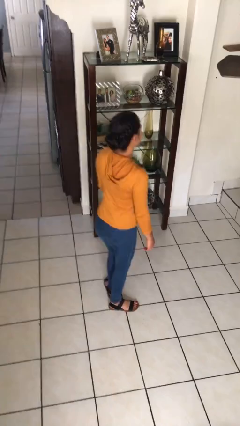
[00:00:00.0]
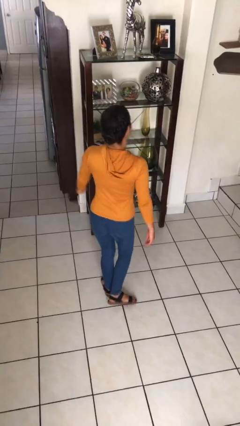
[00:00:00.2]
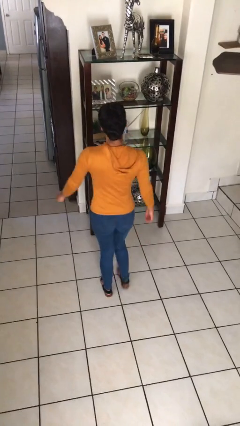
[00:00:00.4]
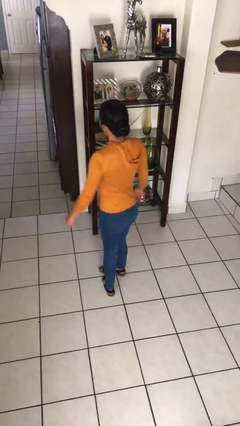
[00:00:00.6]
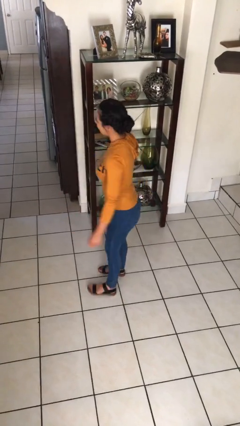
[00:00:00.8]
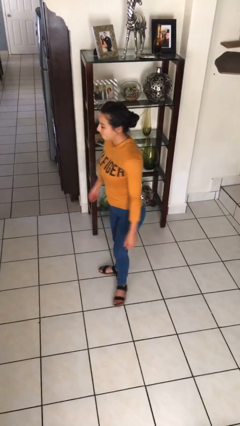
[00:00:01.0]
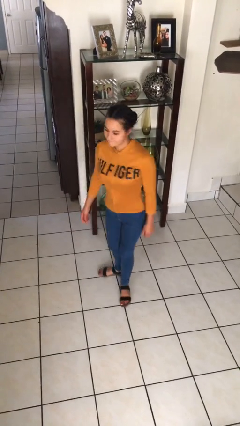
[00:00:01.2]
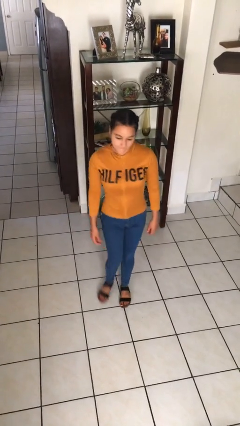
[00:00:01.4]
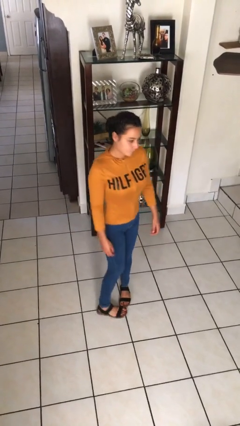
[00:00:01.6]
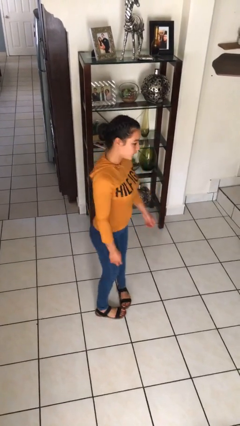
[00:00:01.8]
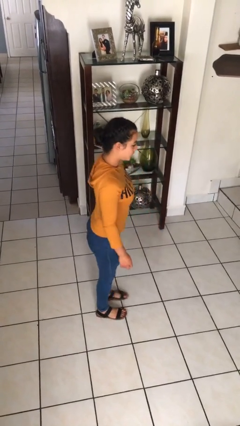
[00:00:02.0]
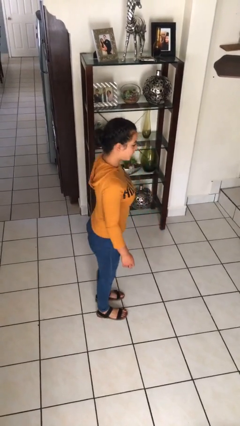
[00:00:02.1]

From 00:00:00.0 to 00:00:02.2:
person twirls

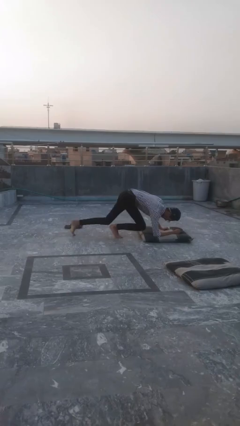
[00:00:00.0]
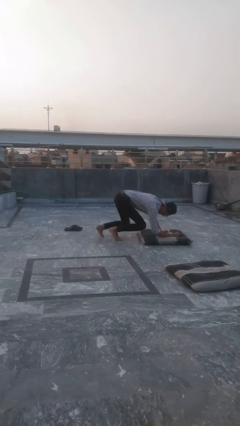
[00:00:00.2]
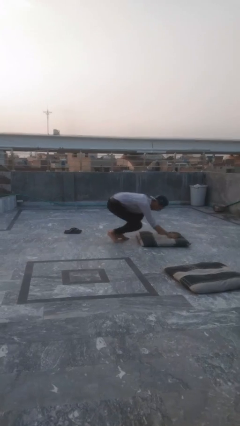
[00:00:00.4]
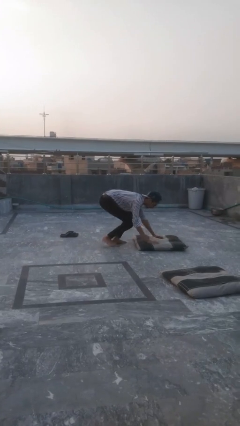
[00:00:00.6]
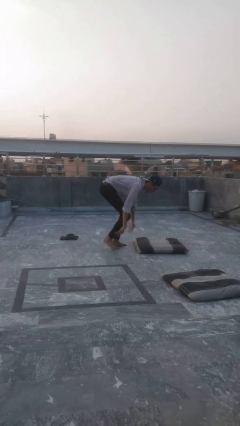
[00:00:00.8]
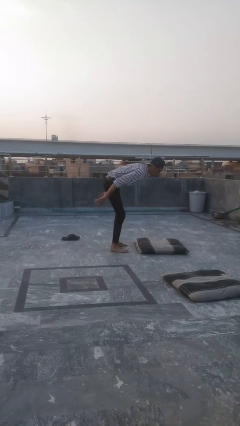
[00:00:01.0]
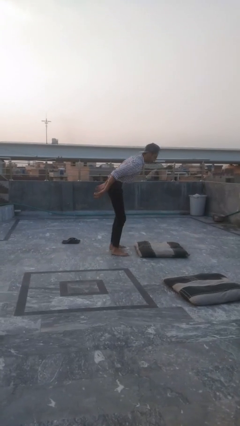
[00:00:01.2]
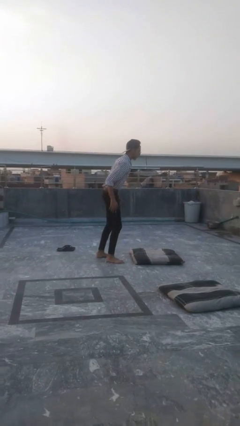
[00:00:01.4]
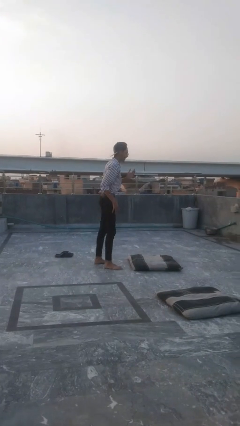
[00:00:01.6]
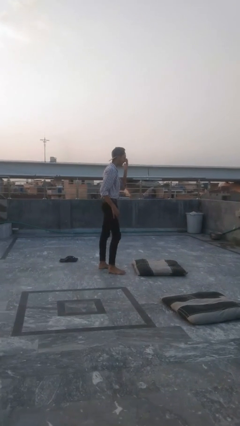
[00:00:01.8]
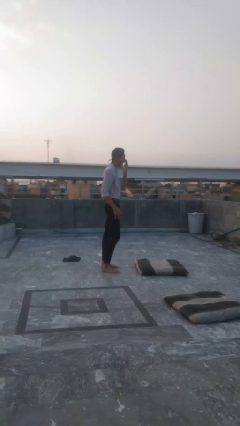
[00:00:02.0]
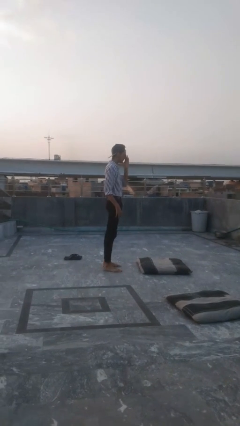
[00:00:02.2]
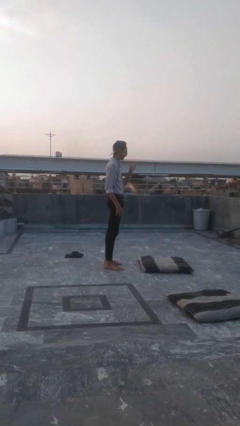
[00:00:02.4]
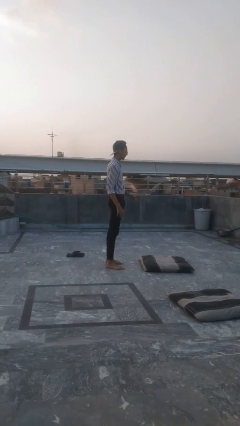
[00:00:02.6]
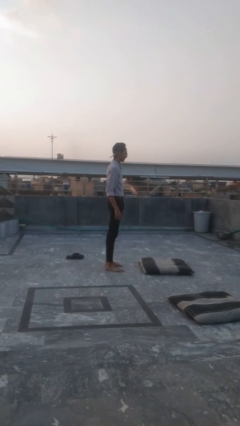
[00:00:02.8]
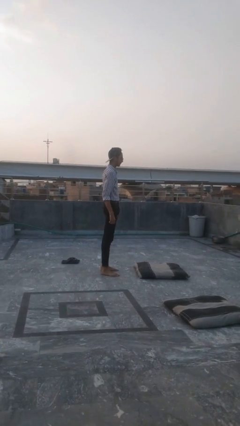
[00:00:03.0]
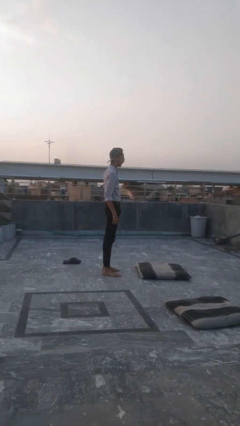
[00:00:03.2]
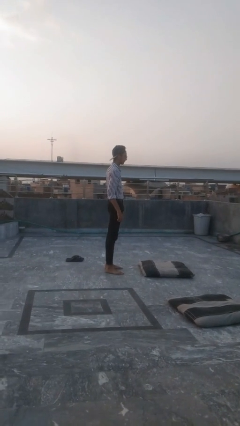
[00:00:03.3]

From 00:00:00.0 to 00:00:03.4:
person stands up from floor

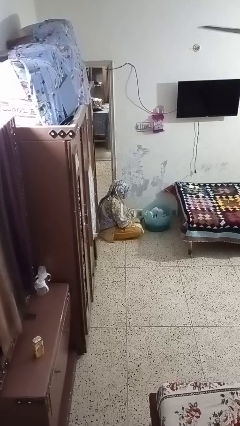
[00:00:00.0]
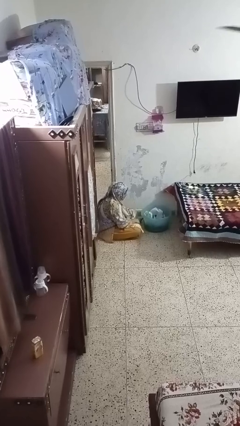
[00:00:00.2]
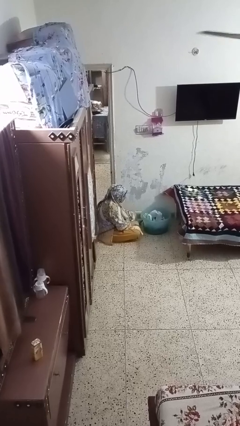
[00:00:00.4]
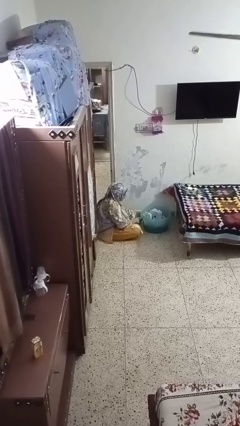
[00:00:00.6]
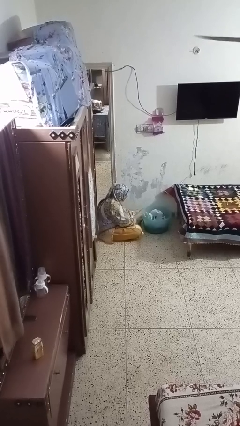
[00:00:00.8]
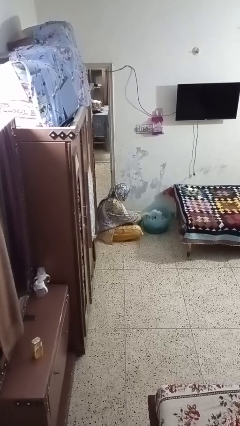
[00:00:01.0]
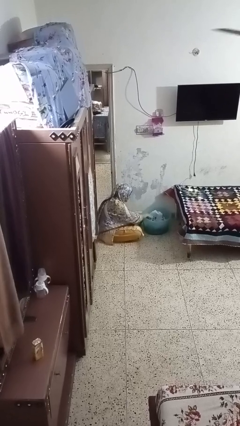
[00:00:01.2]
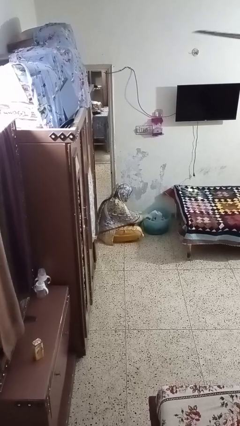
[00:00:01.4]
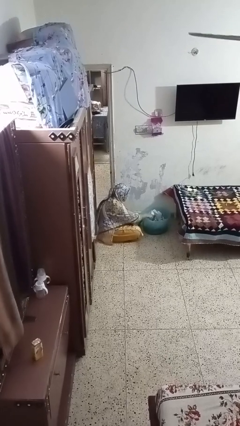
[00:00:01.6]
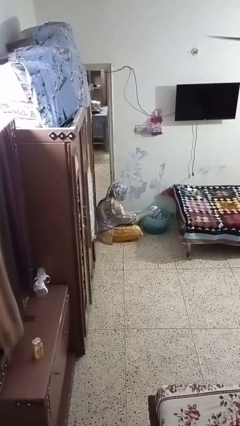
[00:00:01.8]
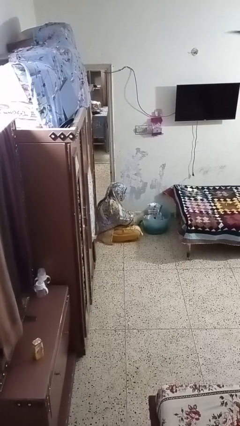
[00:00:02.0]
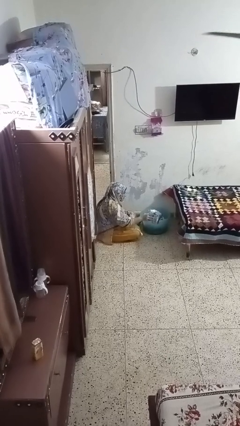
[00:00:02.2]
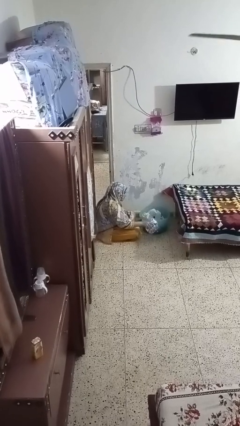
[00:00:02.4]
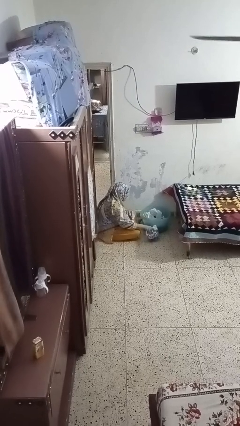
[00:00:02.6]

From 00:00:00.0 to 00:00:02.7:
person takes object from basket

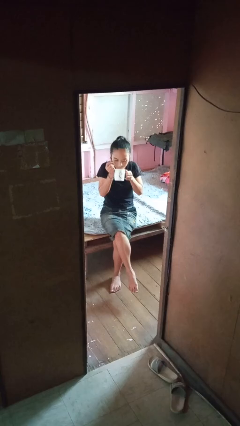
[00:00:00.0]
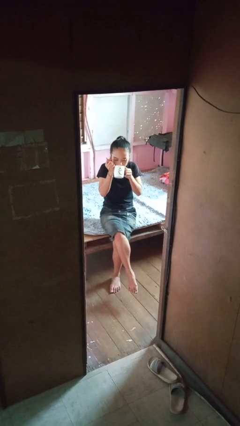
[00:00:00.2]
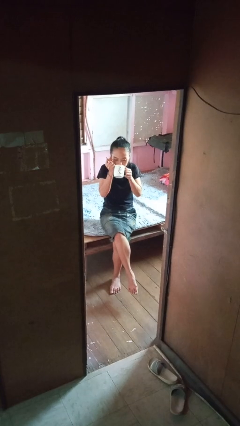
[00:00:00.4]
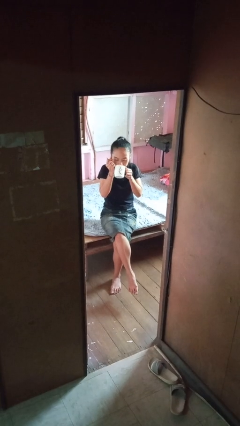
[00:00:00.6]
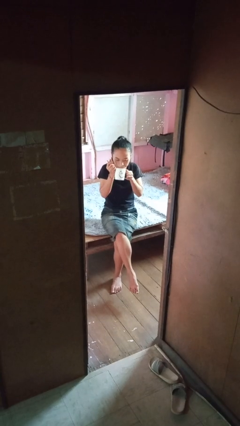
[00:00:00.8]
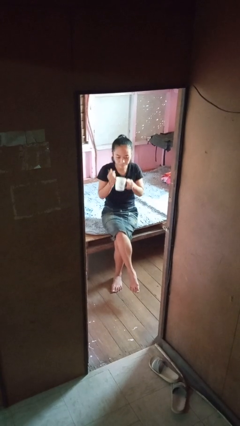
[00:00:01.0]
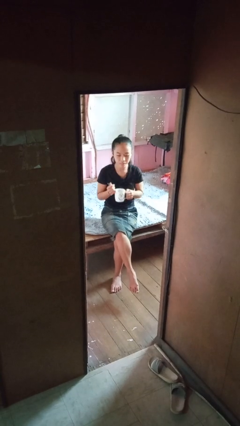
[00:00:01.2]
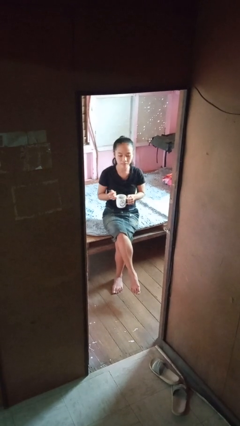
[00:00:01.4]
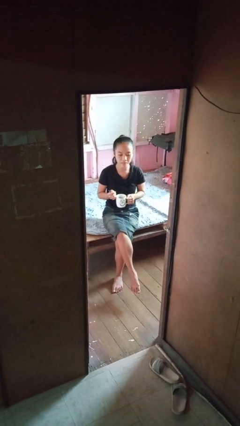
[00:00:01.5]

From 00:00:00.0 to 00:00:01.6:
person drinks from mug

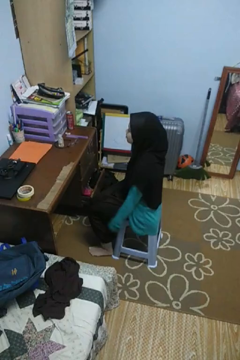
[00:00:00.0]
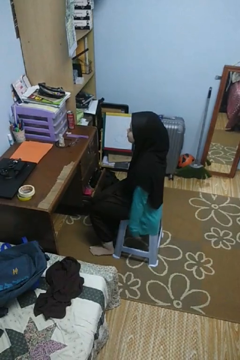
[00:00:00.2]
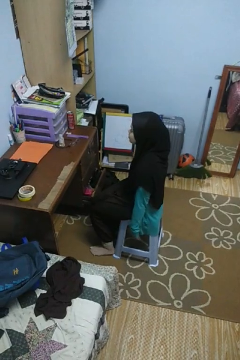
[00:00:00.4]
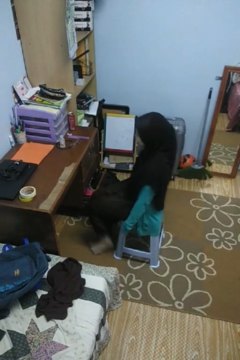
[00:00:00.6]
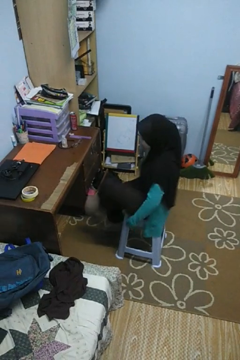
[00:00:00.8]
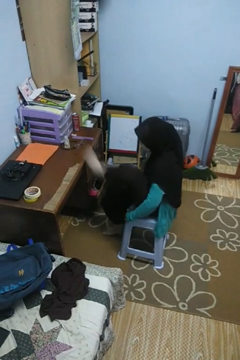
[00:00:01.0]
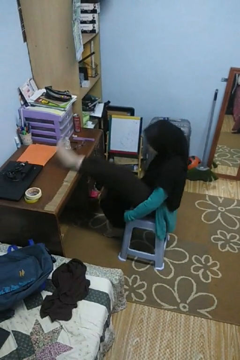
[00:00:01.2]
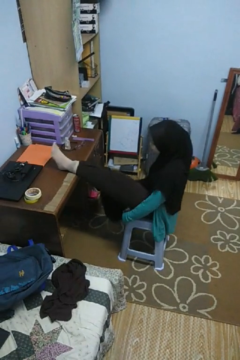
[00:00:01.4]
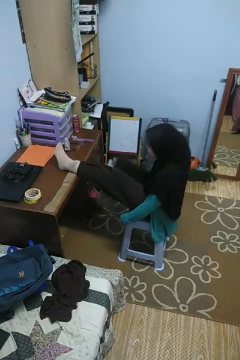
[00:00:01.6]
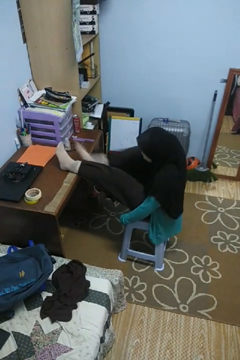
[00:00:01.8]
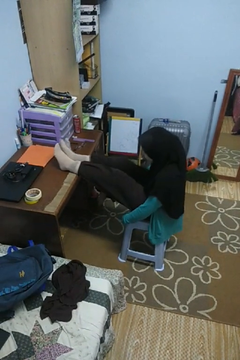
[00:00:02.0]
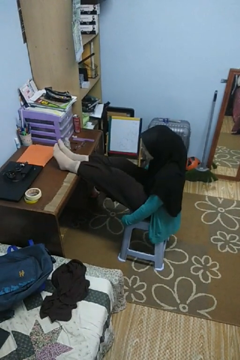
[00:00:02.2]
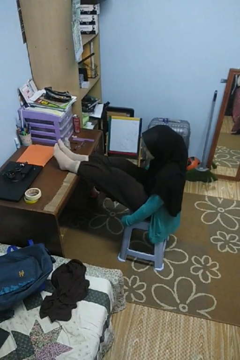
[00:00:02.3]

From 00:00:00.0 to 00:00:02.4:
person puts feet up

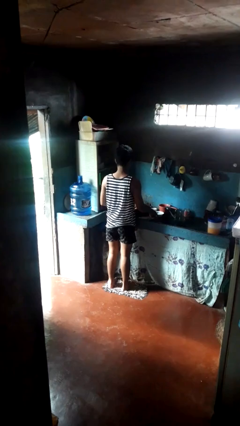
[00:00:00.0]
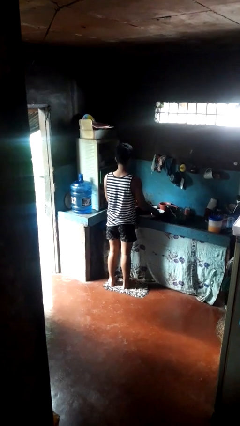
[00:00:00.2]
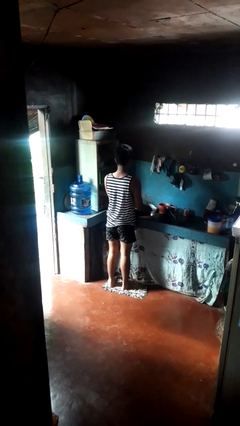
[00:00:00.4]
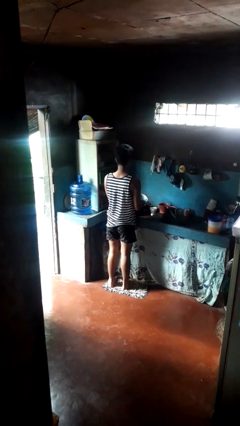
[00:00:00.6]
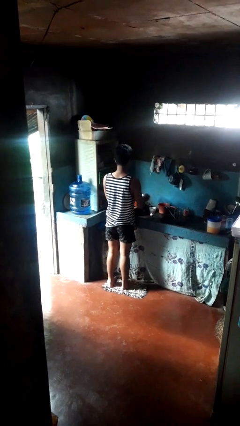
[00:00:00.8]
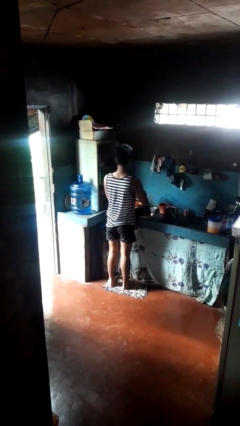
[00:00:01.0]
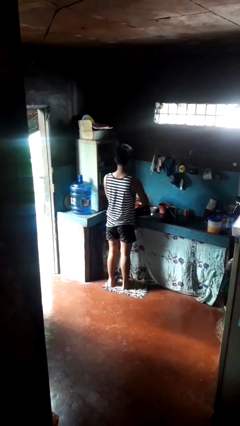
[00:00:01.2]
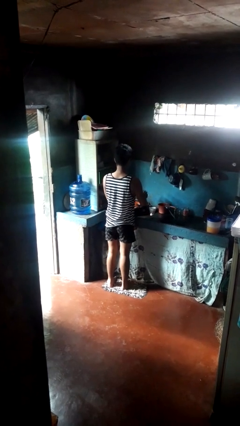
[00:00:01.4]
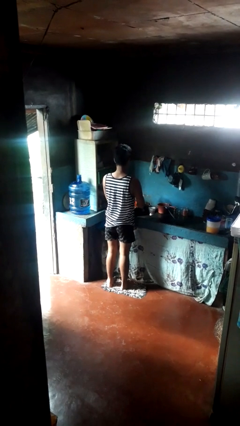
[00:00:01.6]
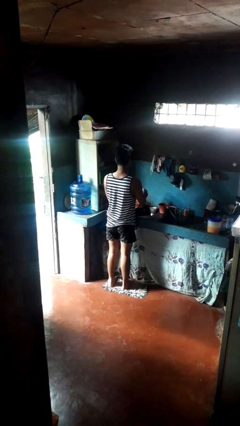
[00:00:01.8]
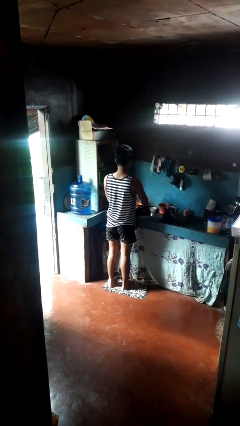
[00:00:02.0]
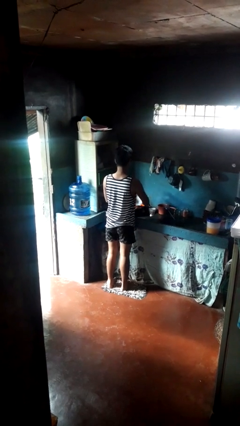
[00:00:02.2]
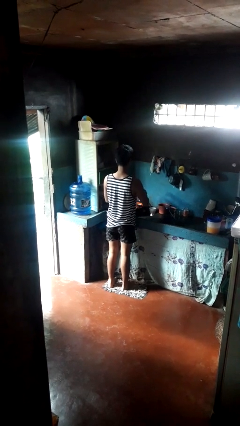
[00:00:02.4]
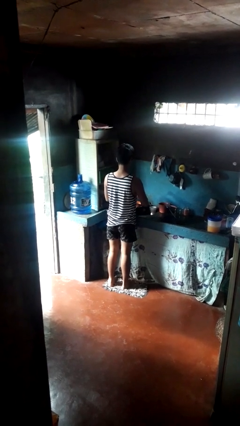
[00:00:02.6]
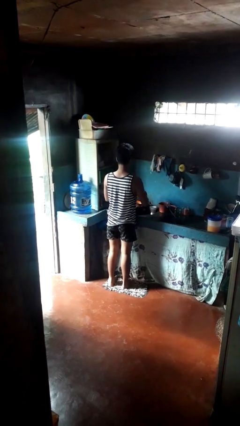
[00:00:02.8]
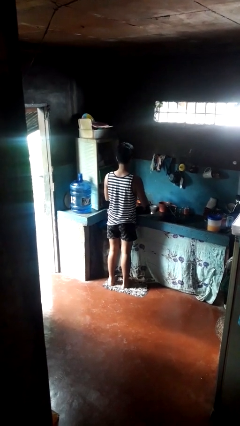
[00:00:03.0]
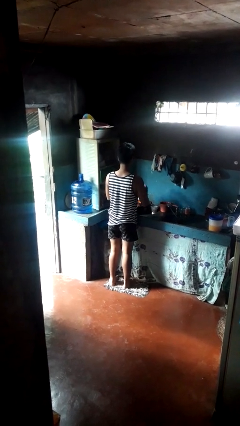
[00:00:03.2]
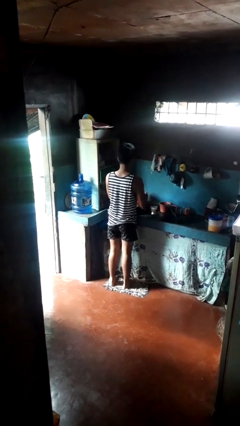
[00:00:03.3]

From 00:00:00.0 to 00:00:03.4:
person washes dish

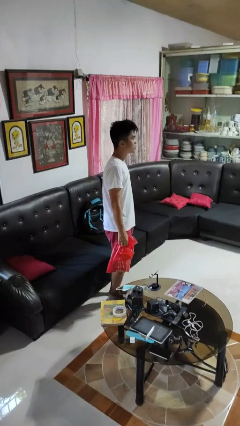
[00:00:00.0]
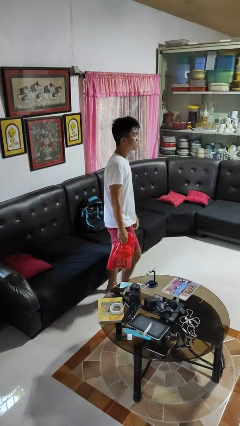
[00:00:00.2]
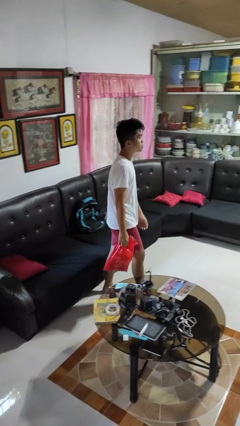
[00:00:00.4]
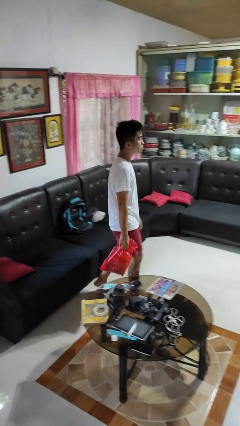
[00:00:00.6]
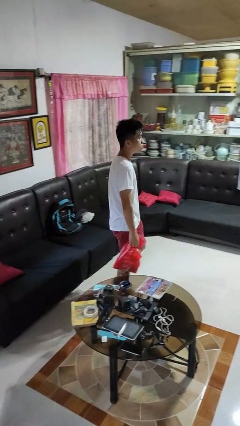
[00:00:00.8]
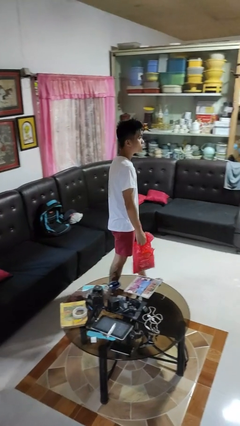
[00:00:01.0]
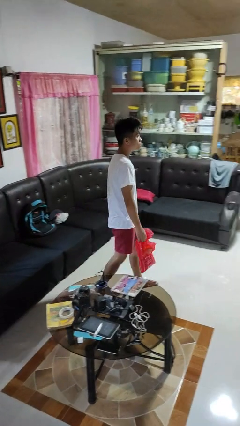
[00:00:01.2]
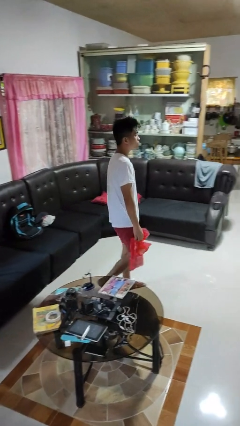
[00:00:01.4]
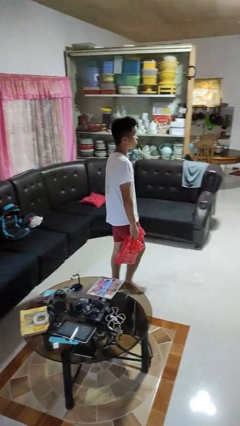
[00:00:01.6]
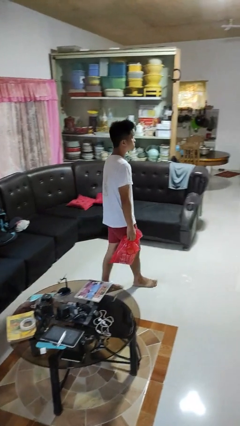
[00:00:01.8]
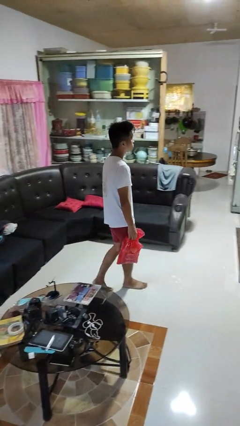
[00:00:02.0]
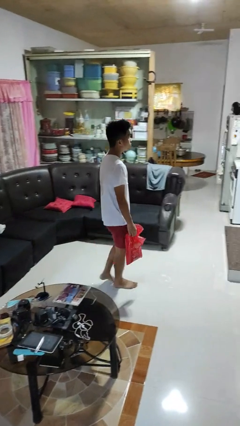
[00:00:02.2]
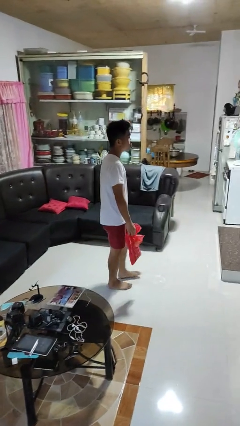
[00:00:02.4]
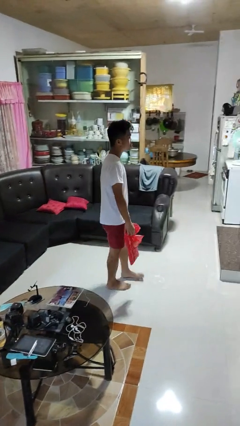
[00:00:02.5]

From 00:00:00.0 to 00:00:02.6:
person carries groceries
